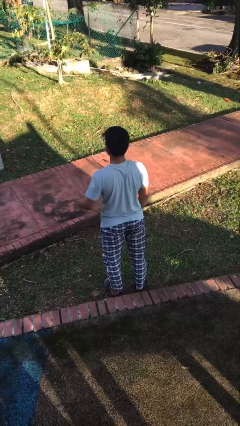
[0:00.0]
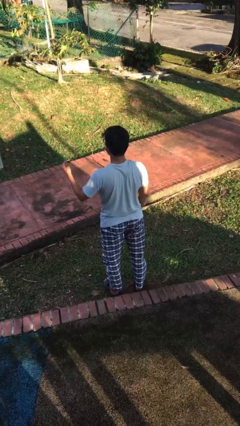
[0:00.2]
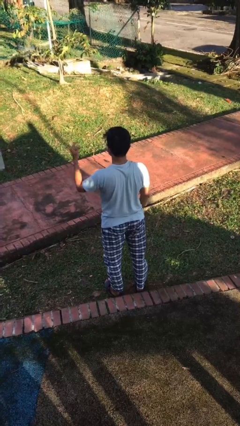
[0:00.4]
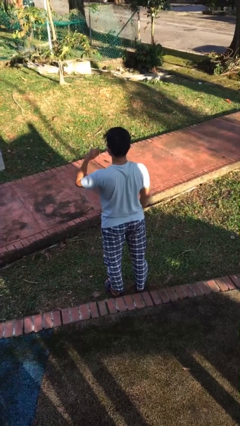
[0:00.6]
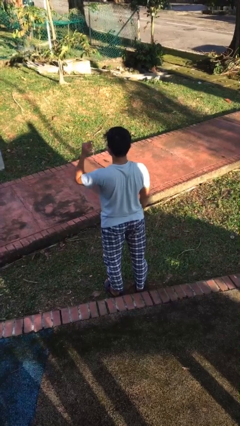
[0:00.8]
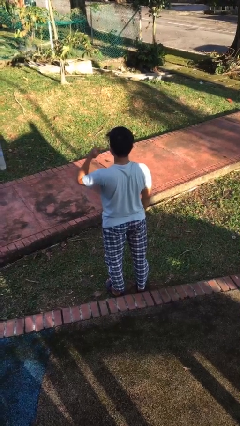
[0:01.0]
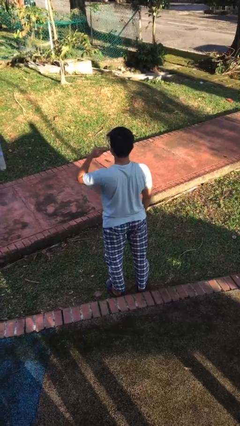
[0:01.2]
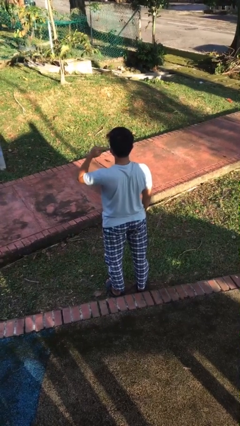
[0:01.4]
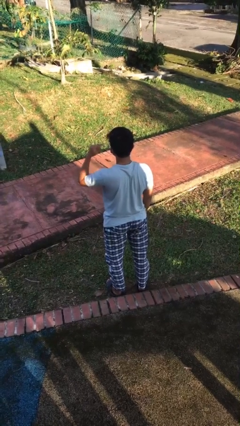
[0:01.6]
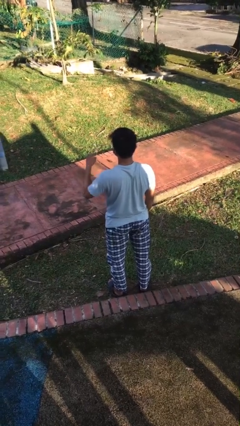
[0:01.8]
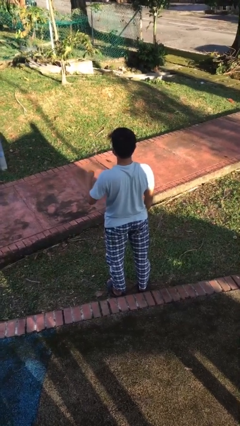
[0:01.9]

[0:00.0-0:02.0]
person gestures listen closely

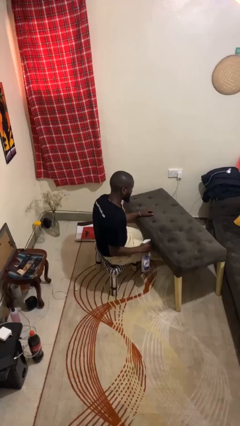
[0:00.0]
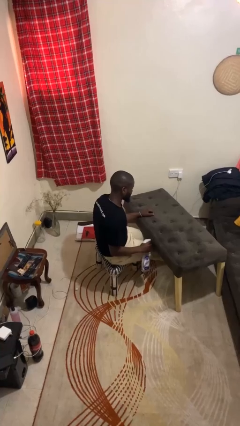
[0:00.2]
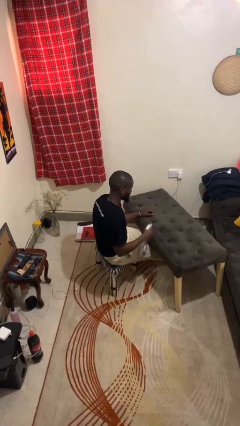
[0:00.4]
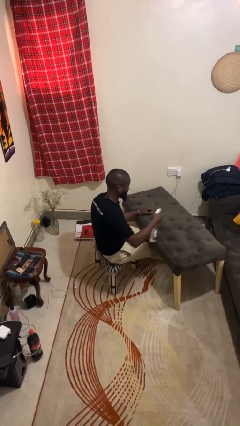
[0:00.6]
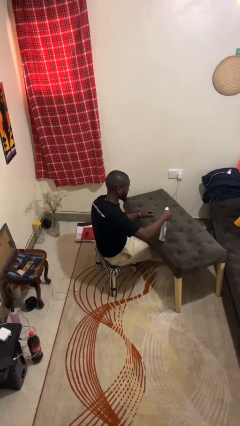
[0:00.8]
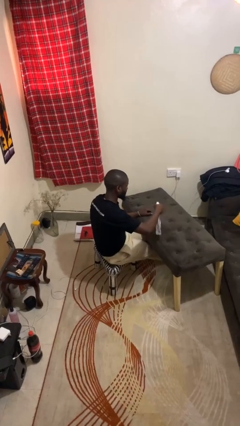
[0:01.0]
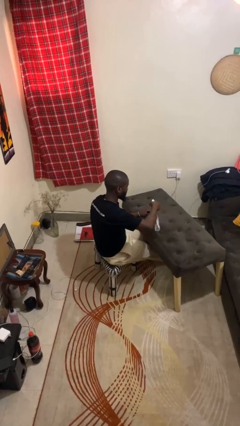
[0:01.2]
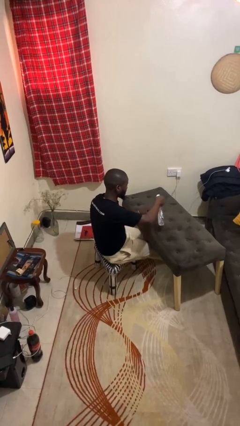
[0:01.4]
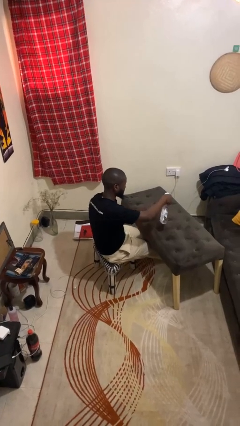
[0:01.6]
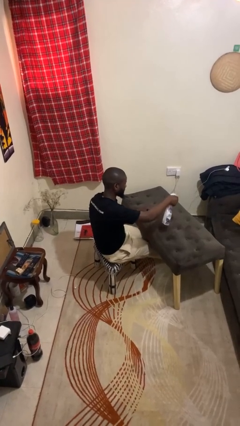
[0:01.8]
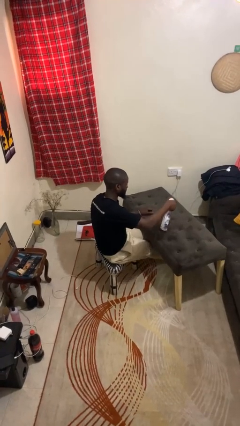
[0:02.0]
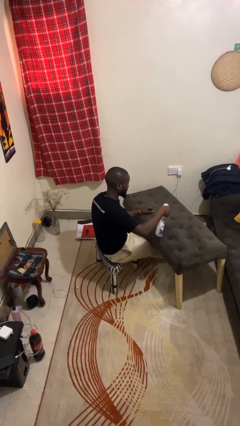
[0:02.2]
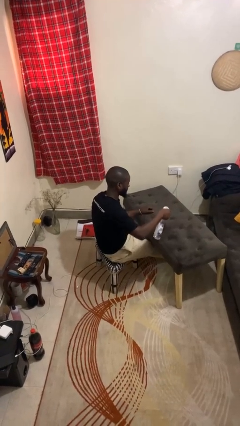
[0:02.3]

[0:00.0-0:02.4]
person sprays from bottle

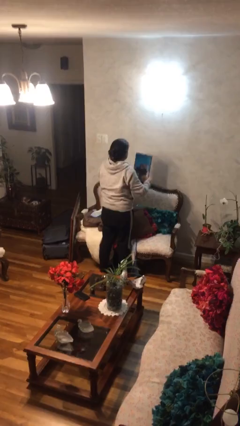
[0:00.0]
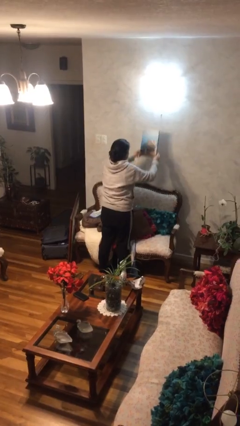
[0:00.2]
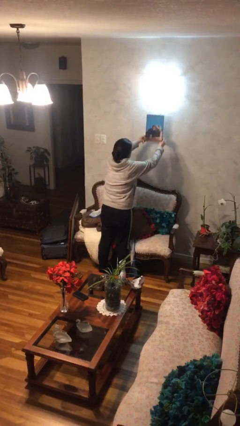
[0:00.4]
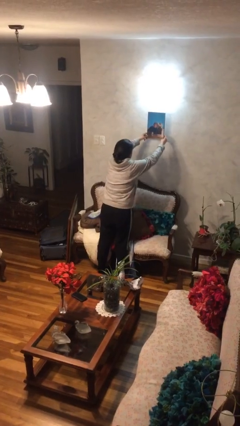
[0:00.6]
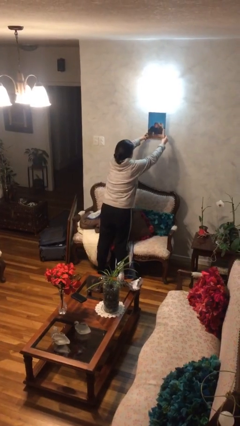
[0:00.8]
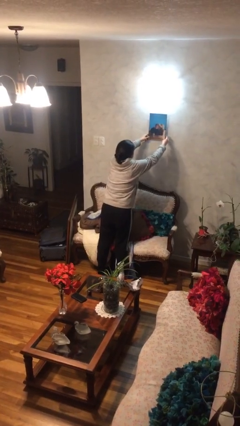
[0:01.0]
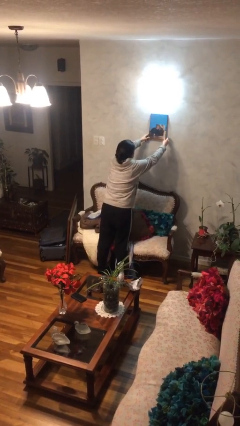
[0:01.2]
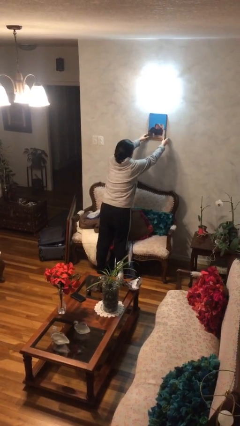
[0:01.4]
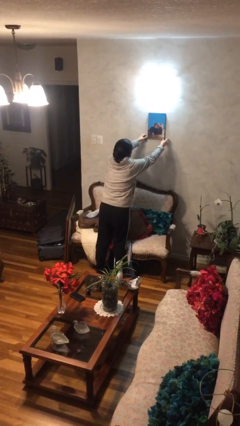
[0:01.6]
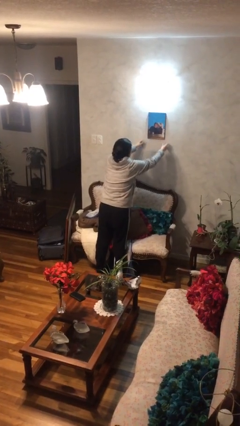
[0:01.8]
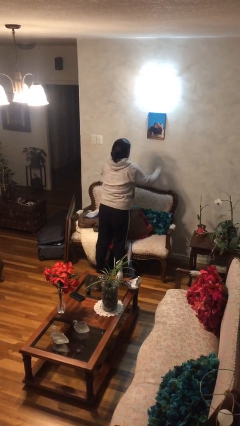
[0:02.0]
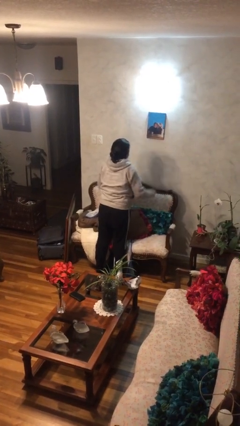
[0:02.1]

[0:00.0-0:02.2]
person puts up picture frame

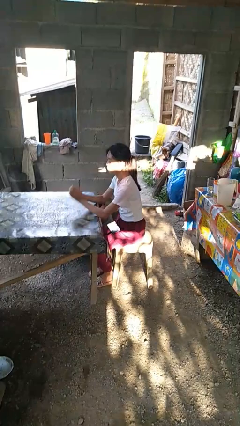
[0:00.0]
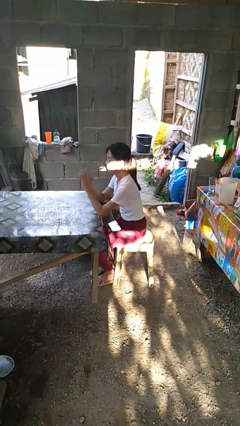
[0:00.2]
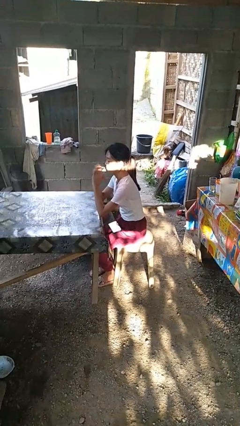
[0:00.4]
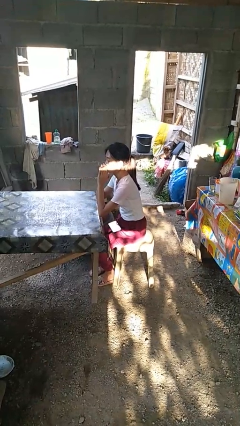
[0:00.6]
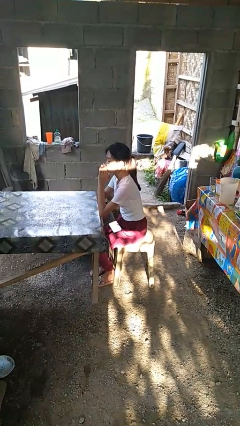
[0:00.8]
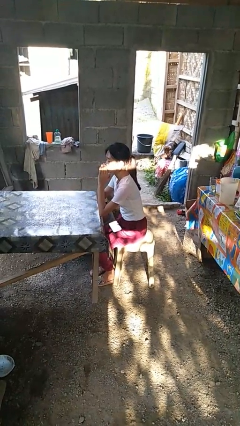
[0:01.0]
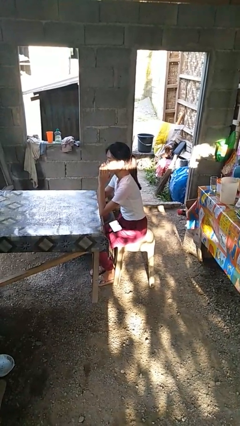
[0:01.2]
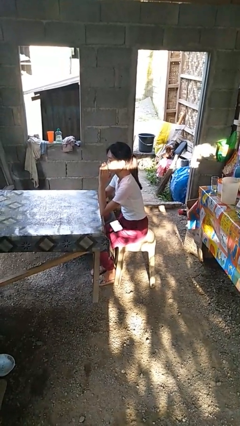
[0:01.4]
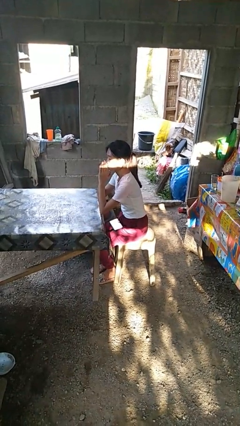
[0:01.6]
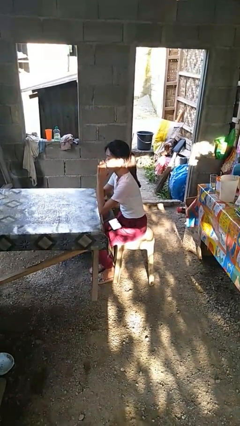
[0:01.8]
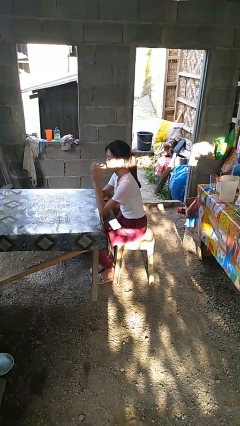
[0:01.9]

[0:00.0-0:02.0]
person prays

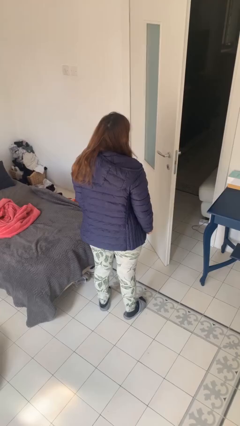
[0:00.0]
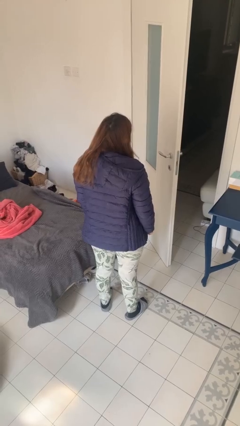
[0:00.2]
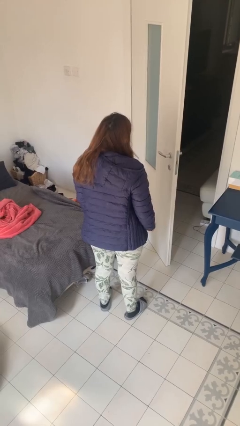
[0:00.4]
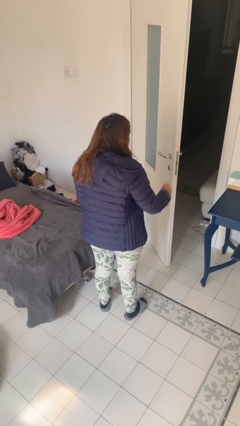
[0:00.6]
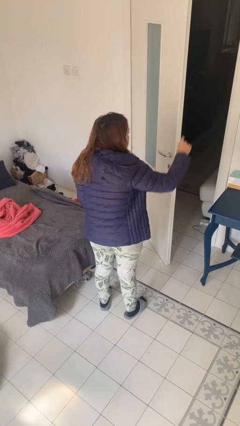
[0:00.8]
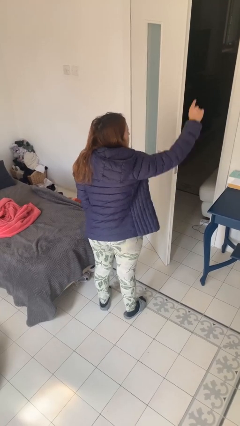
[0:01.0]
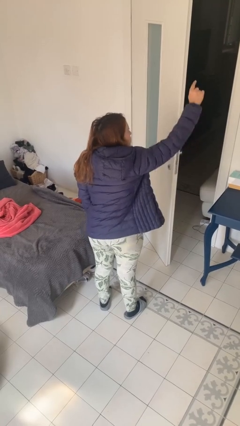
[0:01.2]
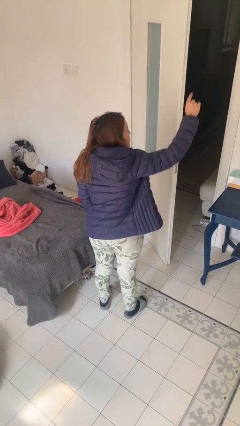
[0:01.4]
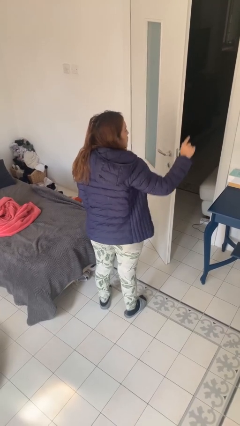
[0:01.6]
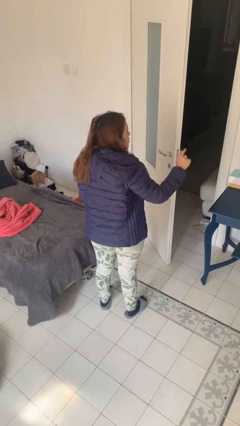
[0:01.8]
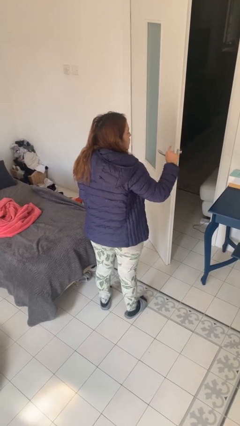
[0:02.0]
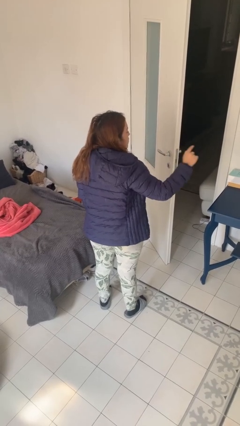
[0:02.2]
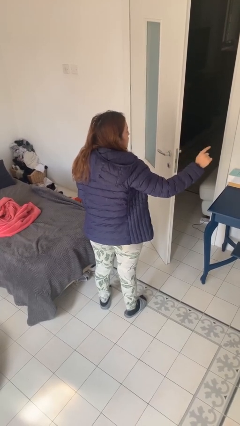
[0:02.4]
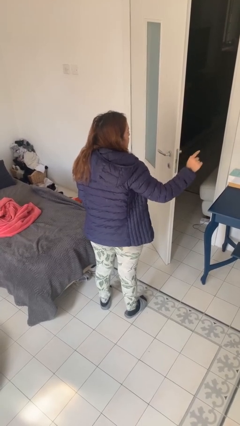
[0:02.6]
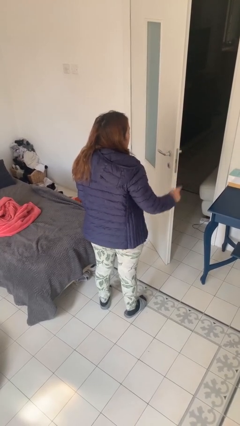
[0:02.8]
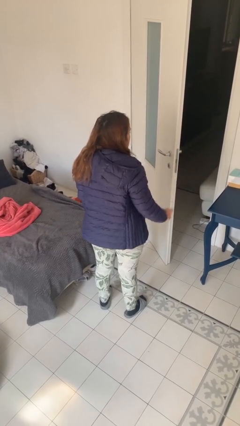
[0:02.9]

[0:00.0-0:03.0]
person gestures number one

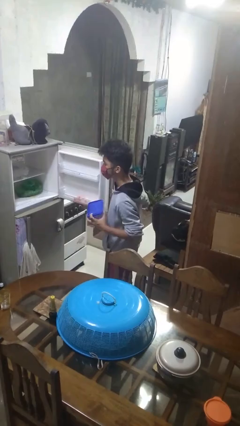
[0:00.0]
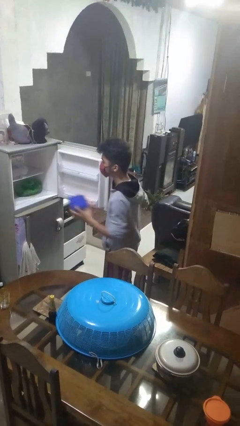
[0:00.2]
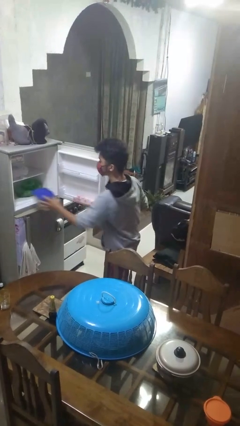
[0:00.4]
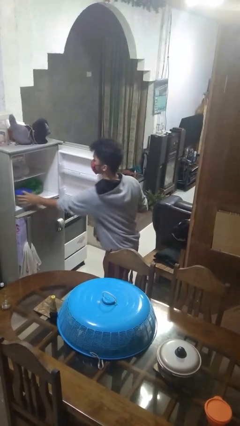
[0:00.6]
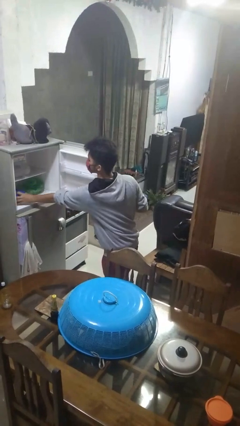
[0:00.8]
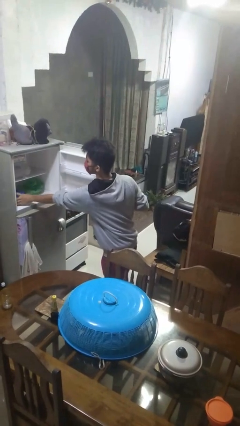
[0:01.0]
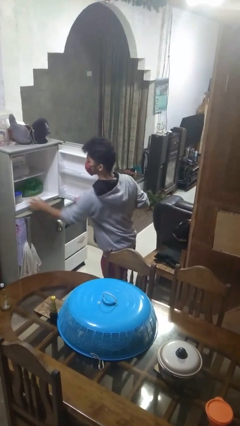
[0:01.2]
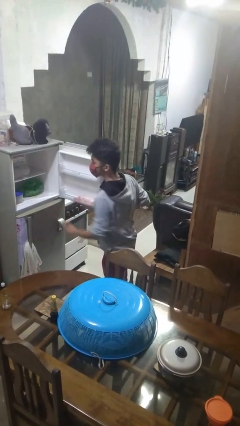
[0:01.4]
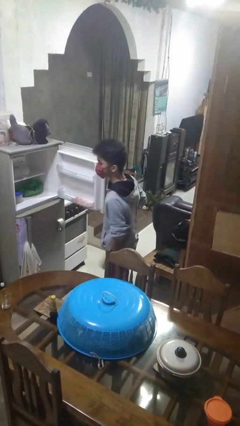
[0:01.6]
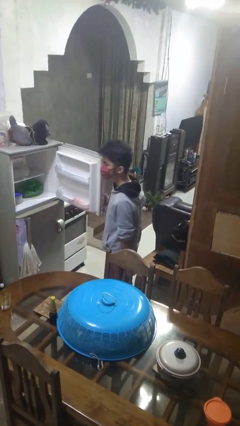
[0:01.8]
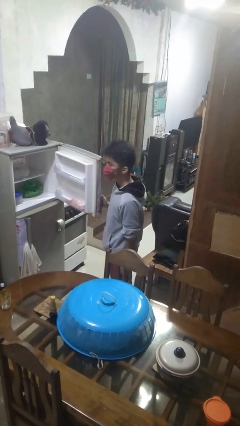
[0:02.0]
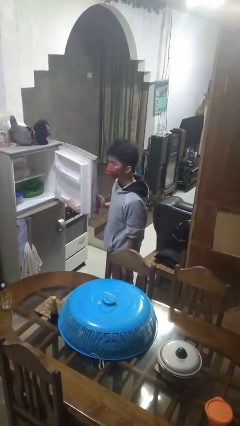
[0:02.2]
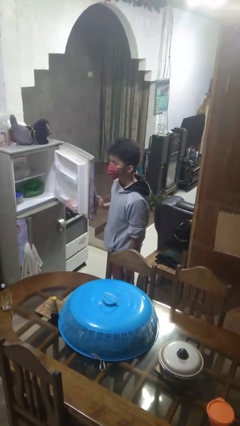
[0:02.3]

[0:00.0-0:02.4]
person puts object into refrigerator

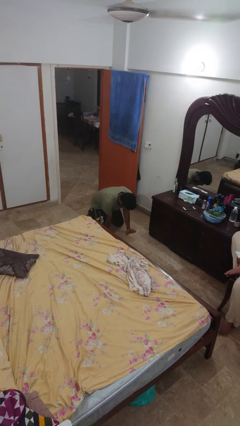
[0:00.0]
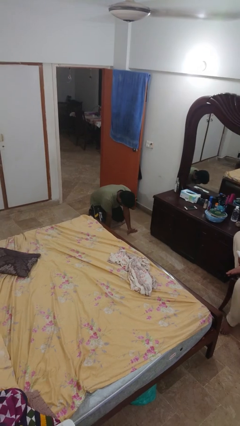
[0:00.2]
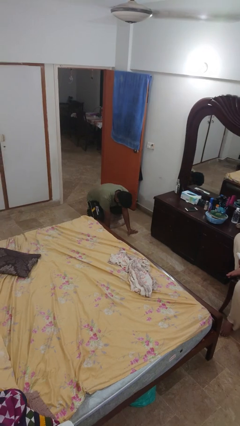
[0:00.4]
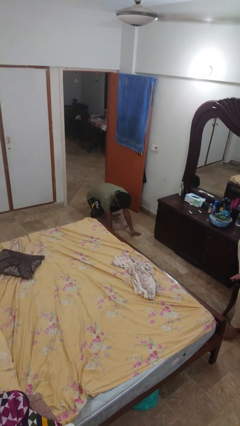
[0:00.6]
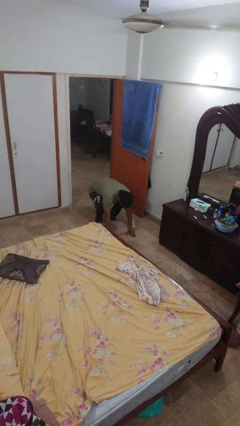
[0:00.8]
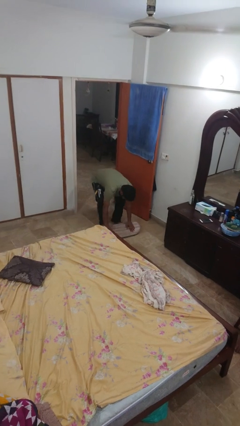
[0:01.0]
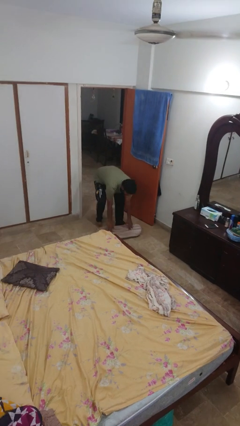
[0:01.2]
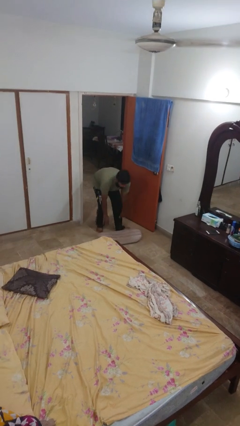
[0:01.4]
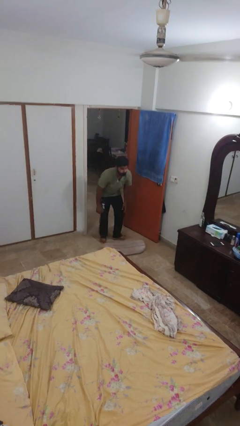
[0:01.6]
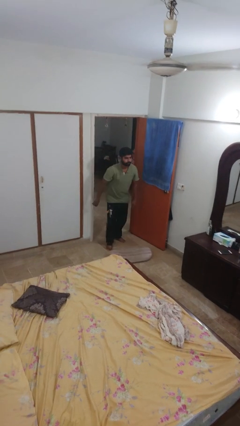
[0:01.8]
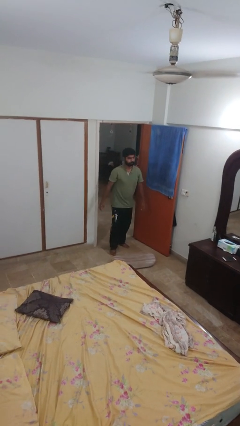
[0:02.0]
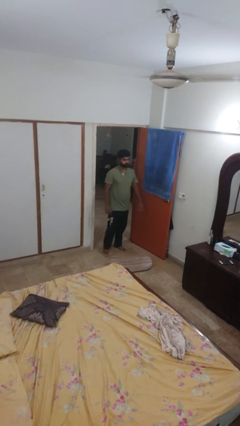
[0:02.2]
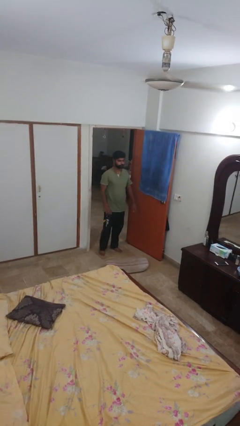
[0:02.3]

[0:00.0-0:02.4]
person stands up from floor

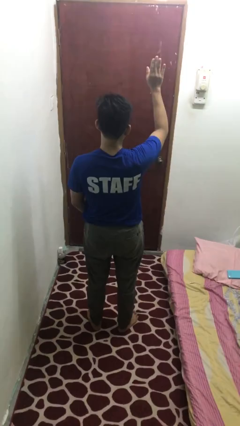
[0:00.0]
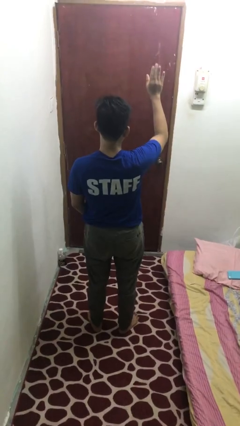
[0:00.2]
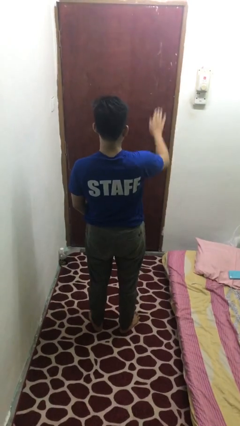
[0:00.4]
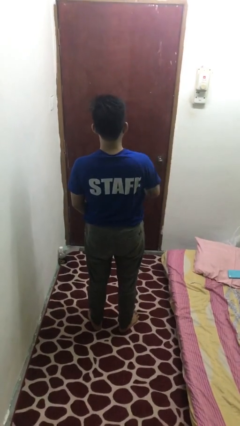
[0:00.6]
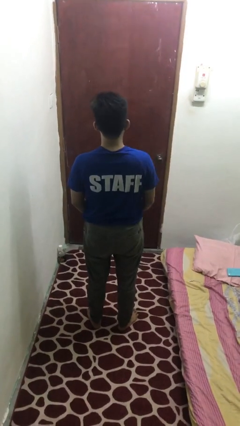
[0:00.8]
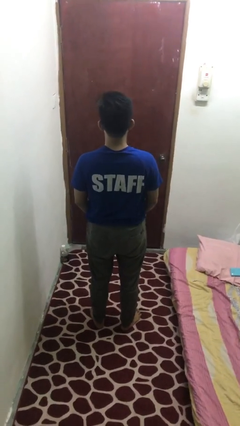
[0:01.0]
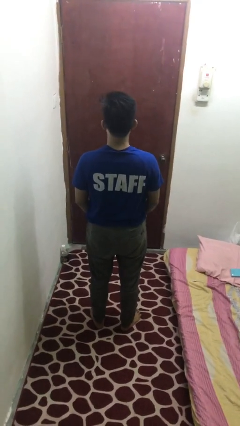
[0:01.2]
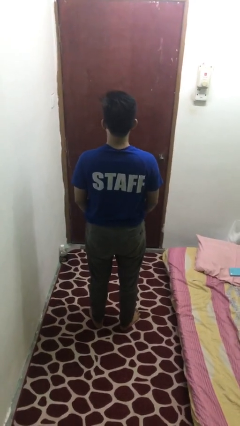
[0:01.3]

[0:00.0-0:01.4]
person gestures swipe down
